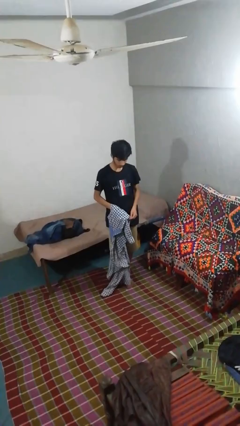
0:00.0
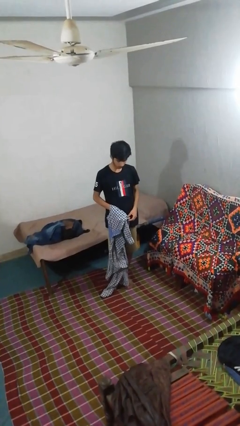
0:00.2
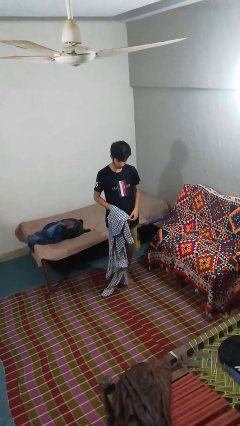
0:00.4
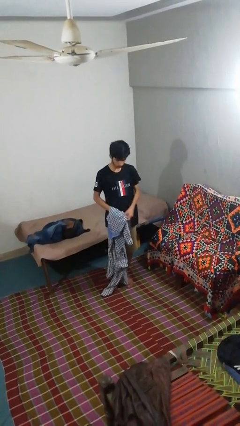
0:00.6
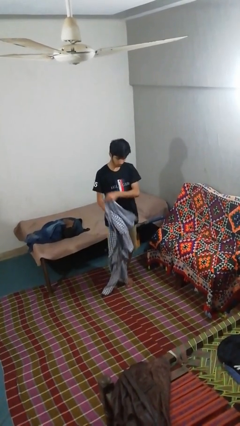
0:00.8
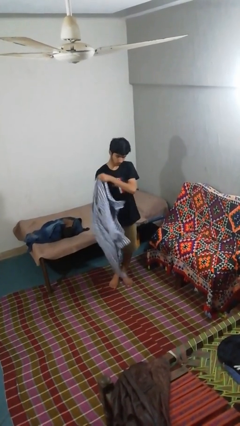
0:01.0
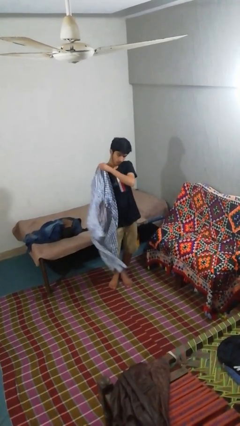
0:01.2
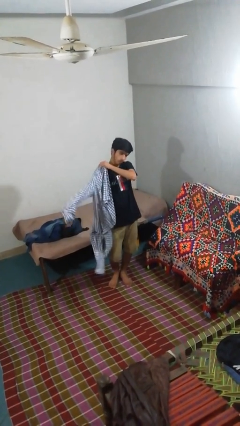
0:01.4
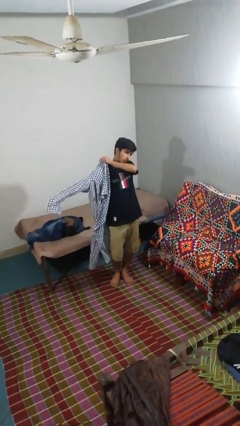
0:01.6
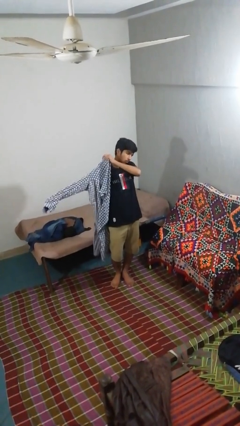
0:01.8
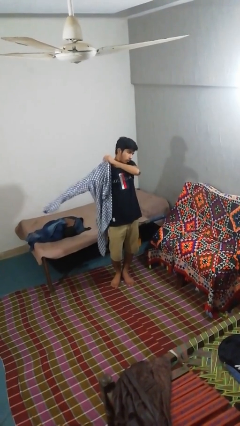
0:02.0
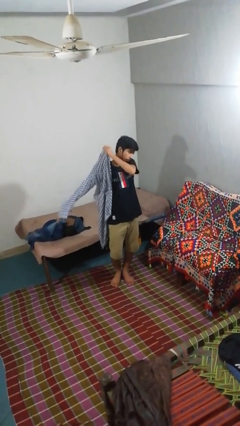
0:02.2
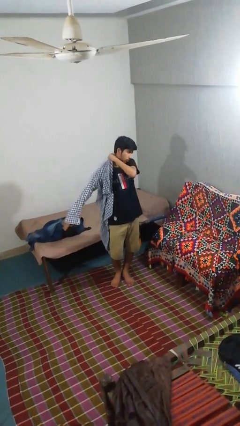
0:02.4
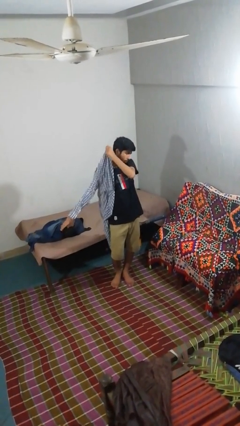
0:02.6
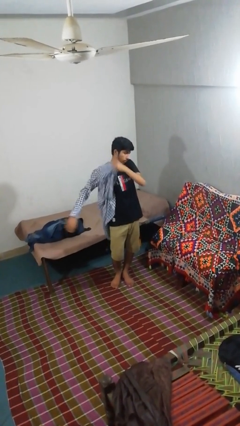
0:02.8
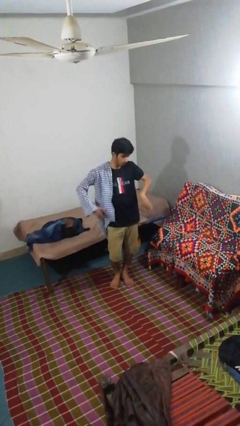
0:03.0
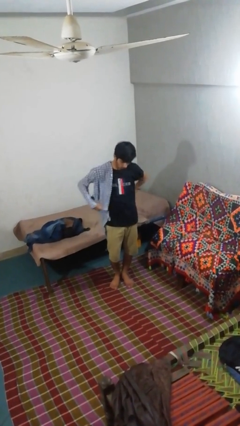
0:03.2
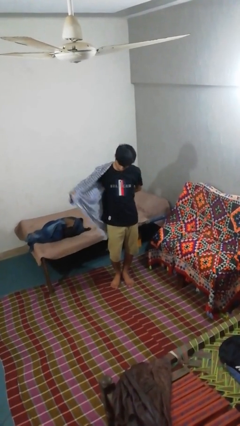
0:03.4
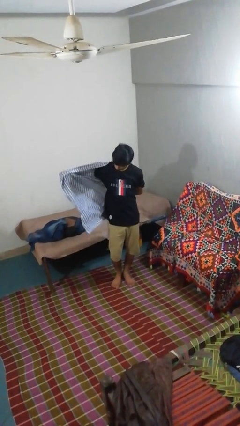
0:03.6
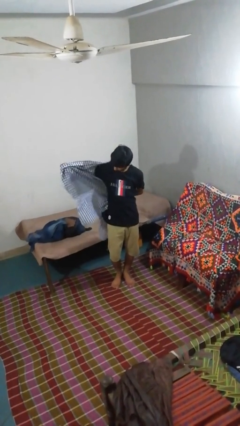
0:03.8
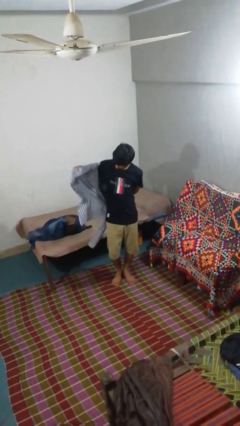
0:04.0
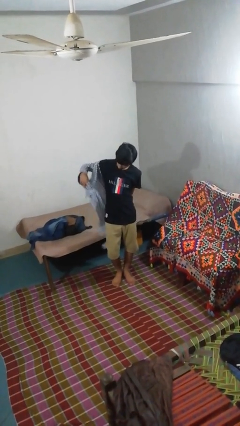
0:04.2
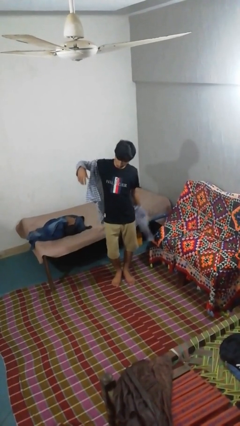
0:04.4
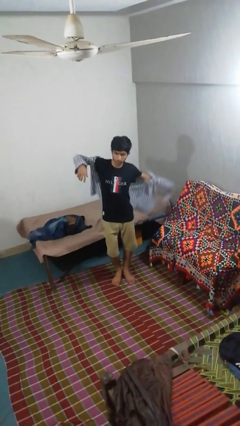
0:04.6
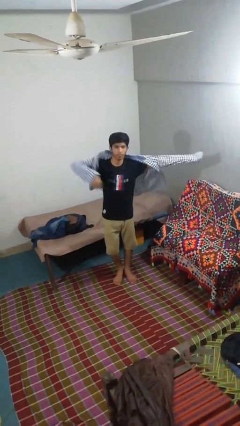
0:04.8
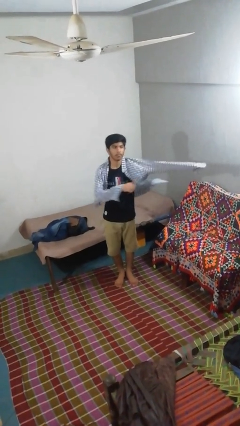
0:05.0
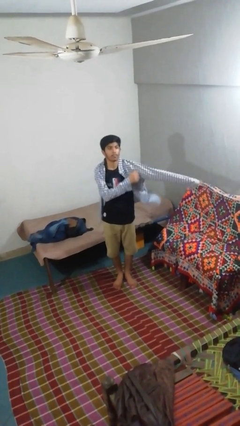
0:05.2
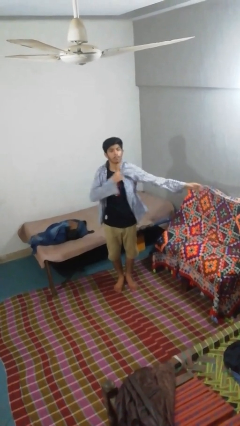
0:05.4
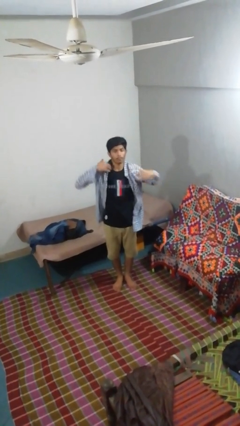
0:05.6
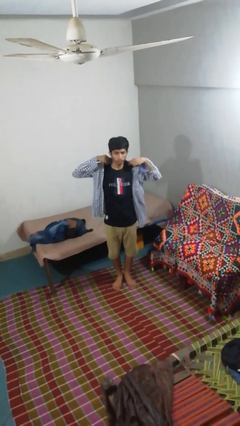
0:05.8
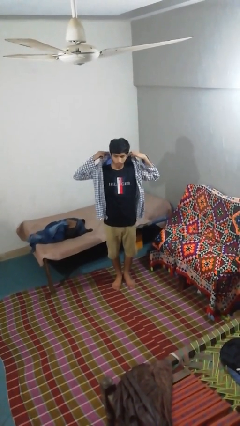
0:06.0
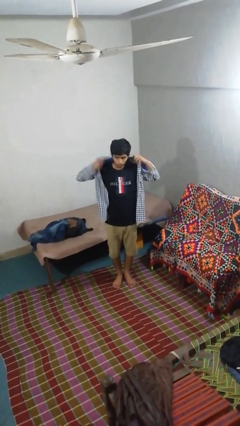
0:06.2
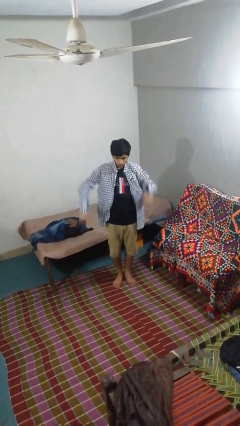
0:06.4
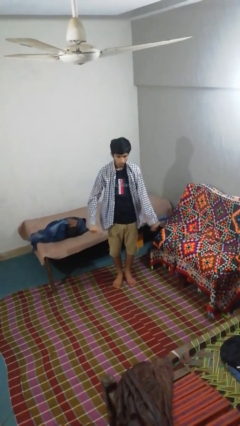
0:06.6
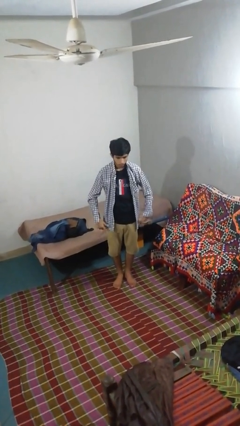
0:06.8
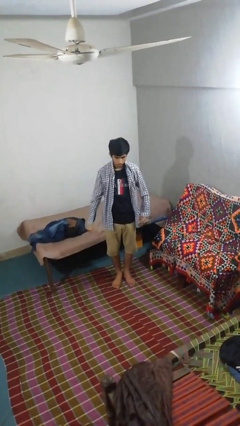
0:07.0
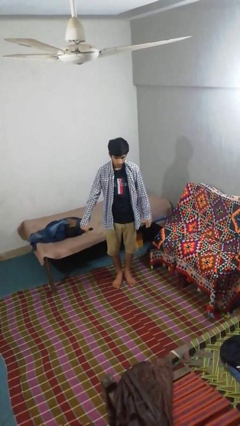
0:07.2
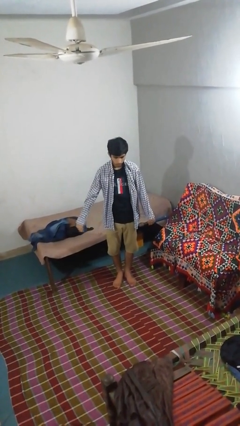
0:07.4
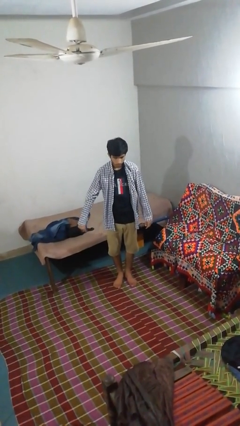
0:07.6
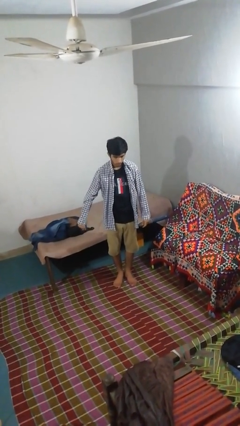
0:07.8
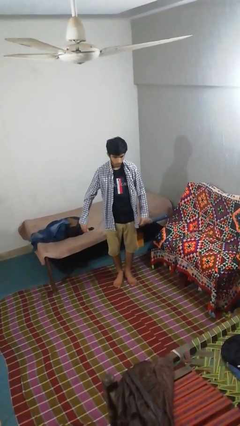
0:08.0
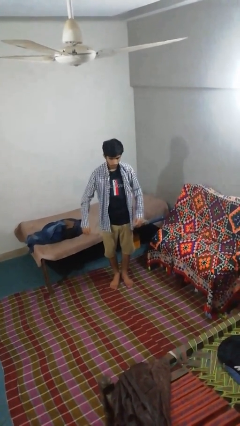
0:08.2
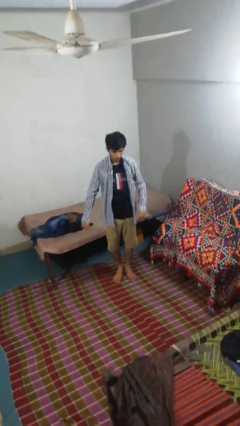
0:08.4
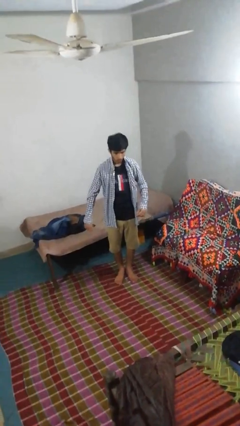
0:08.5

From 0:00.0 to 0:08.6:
person puts on shirt

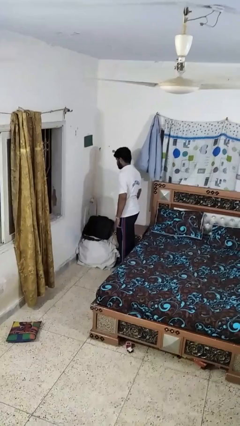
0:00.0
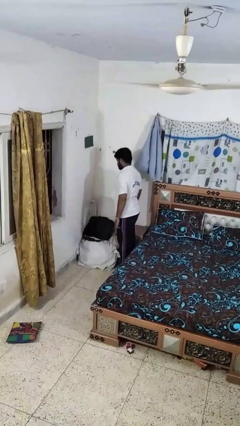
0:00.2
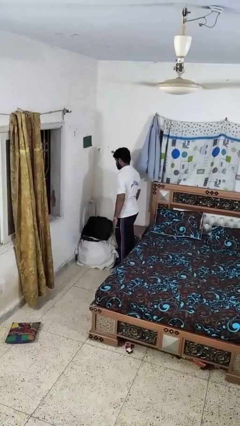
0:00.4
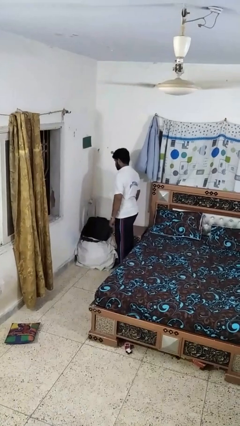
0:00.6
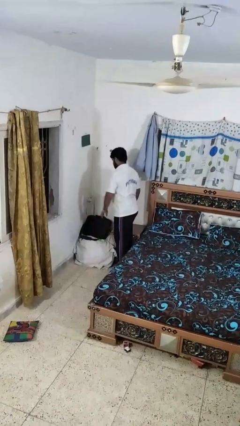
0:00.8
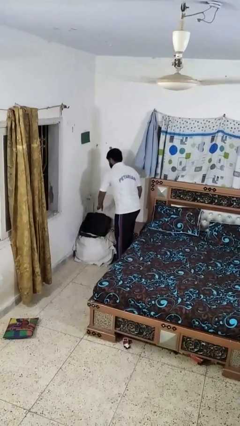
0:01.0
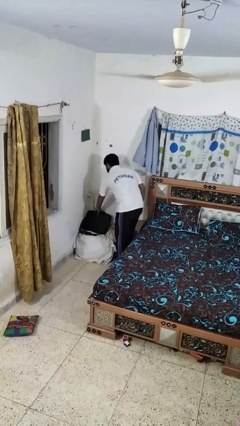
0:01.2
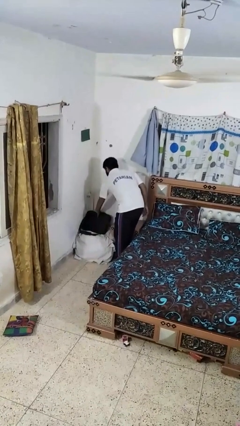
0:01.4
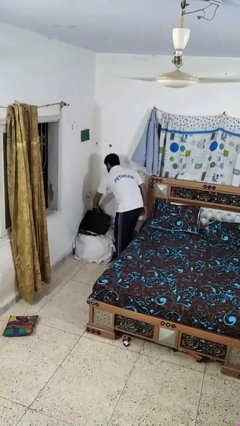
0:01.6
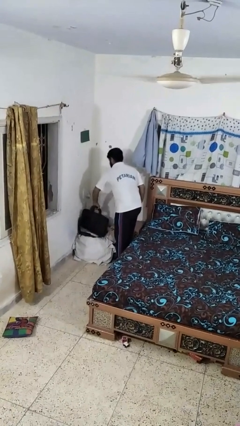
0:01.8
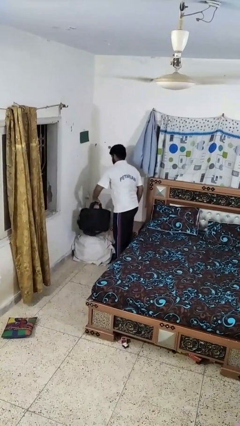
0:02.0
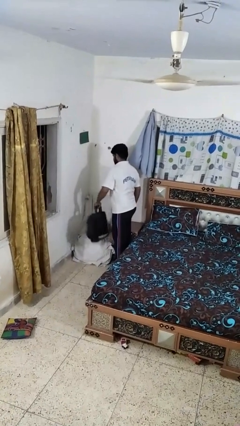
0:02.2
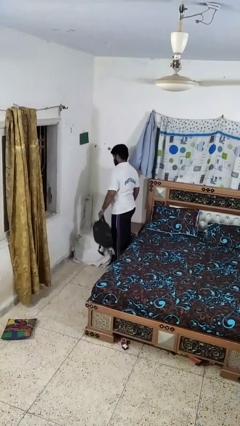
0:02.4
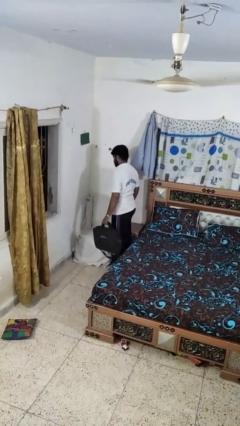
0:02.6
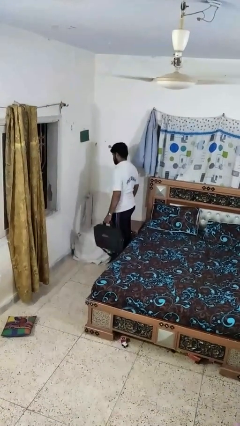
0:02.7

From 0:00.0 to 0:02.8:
person picks up object from couch

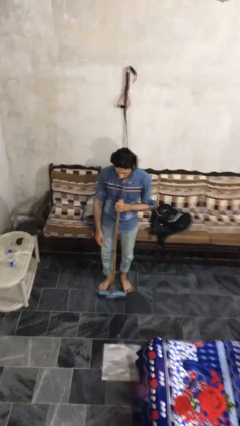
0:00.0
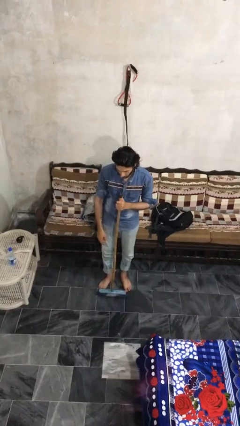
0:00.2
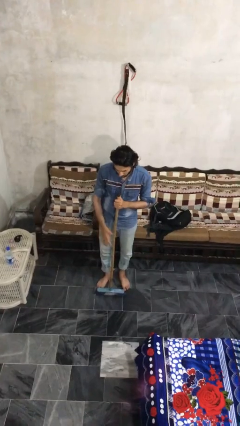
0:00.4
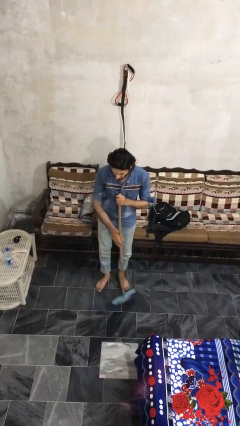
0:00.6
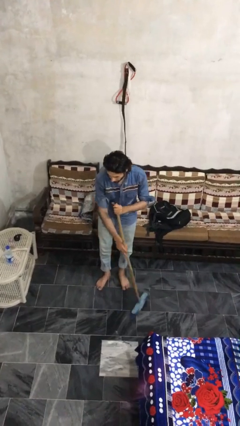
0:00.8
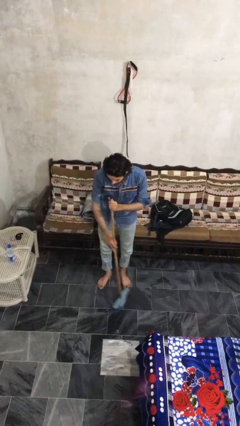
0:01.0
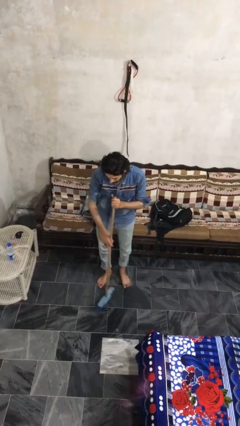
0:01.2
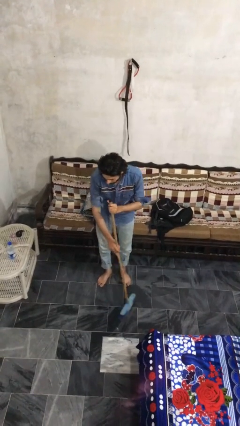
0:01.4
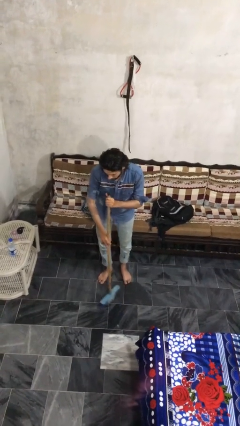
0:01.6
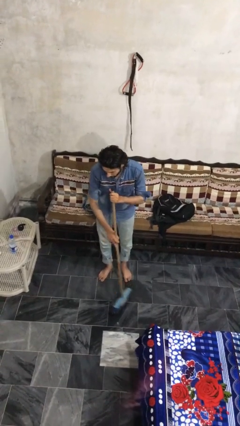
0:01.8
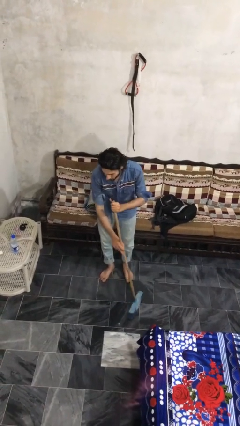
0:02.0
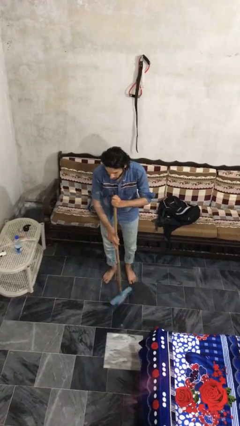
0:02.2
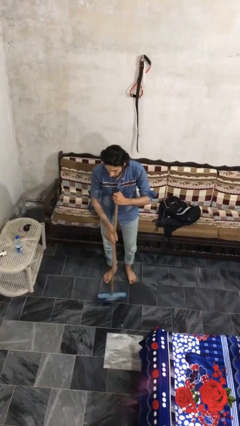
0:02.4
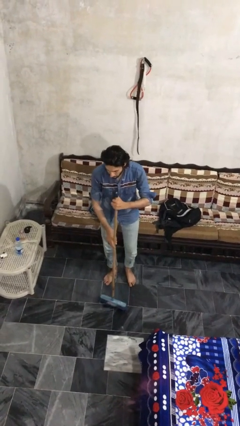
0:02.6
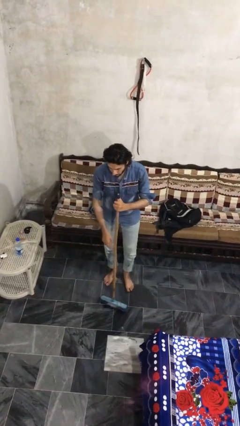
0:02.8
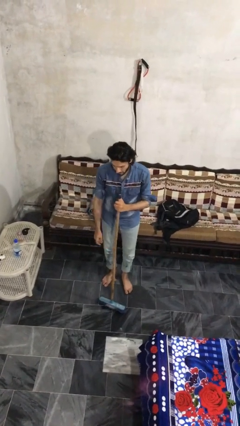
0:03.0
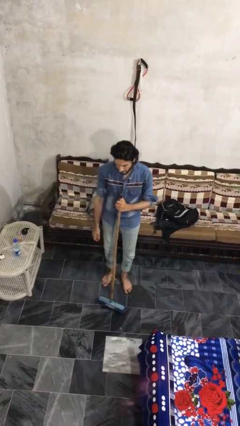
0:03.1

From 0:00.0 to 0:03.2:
person sweeps floor

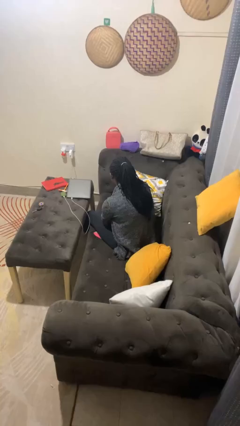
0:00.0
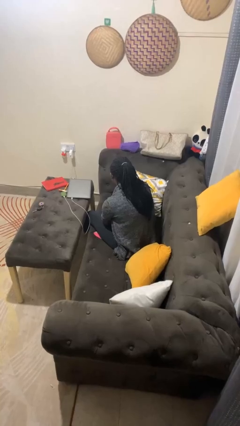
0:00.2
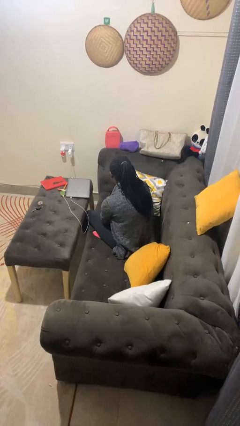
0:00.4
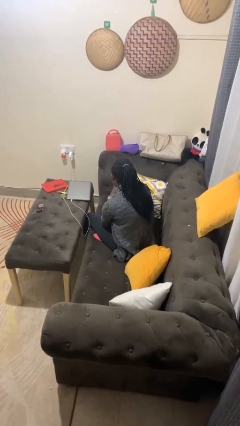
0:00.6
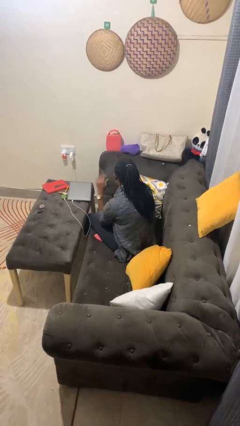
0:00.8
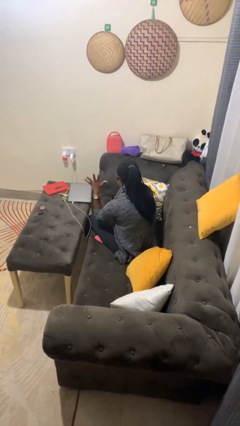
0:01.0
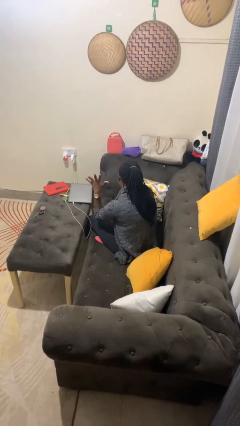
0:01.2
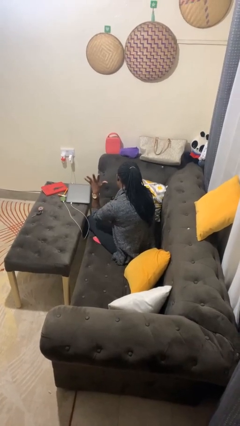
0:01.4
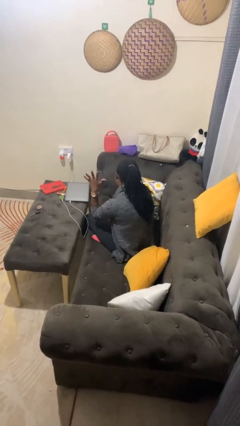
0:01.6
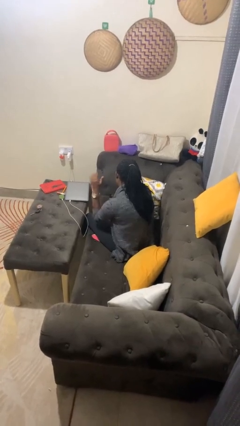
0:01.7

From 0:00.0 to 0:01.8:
person gestures number five

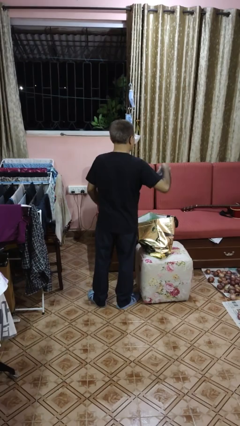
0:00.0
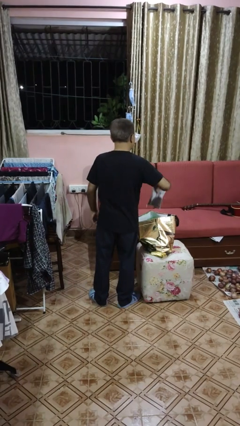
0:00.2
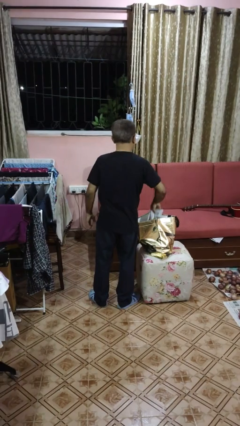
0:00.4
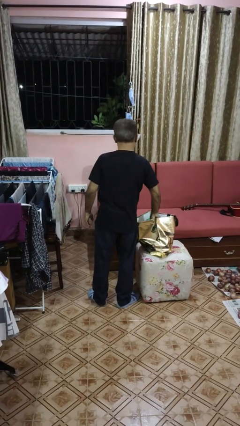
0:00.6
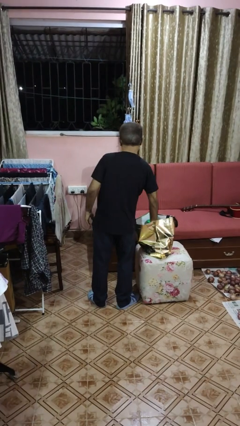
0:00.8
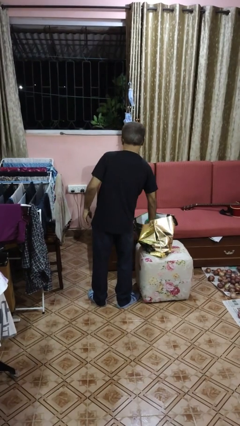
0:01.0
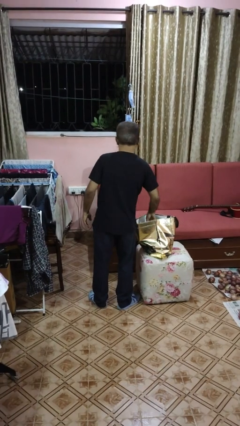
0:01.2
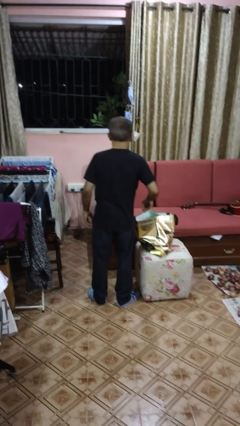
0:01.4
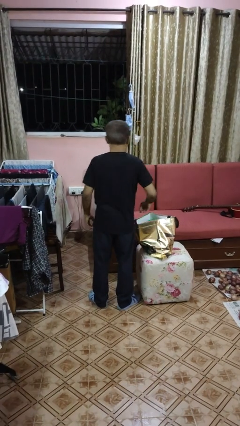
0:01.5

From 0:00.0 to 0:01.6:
person puts object into bag
